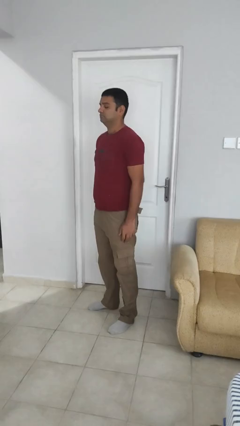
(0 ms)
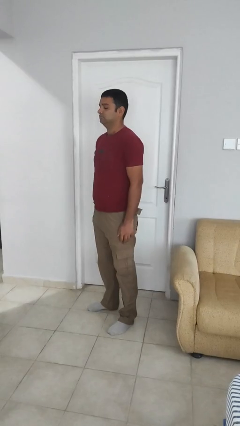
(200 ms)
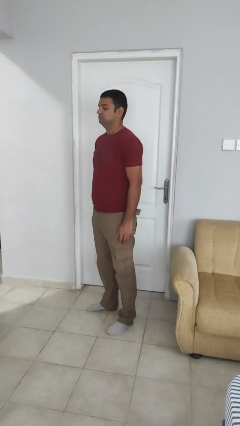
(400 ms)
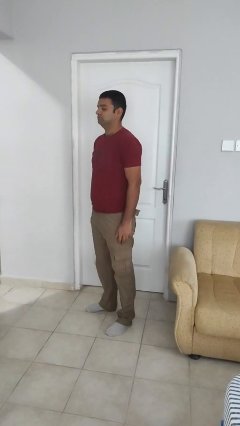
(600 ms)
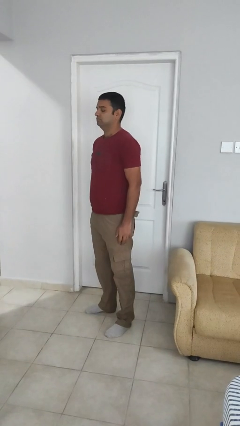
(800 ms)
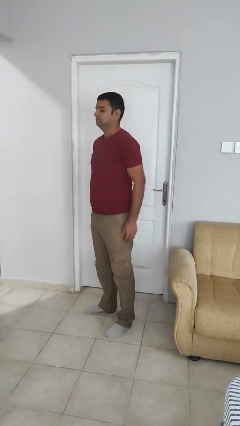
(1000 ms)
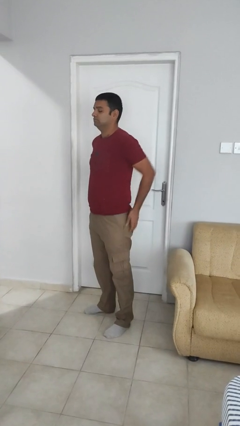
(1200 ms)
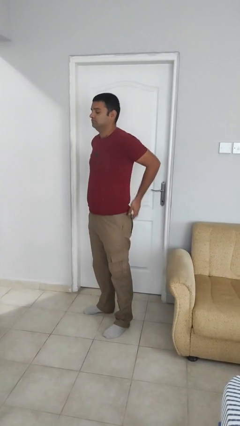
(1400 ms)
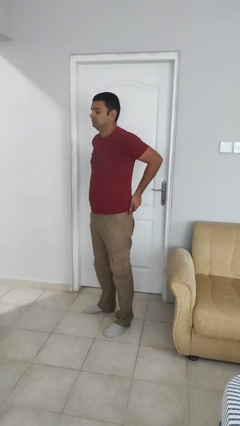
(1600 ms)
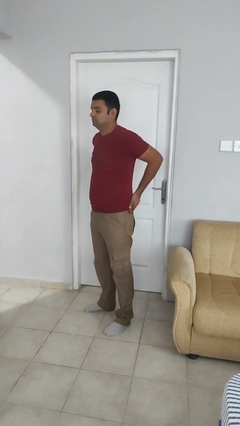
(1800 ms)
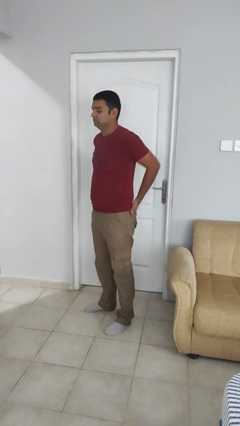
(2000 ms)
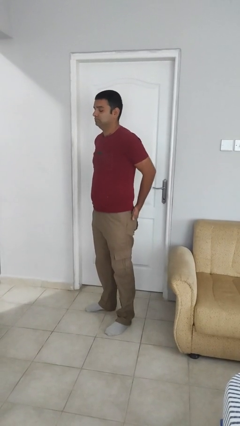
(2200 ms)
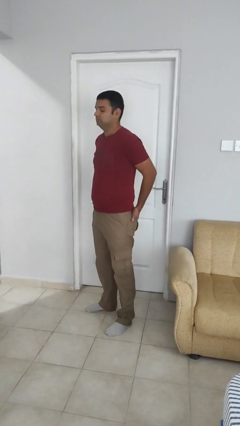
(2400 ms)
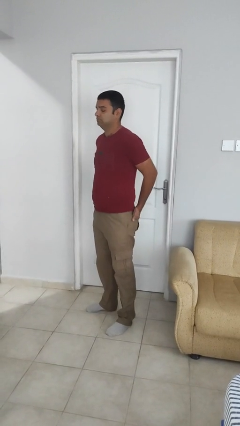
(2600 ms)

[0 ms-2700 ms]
person puts hands in back pockets

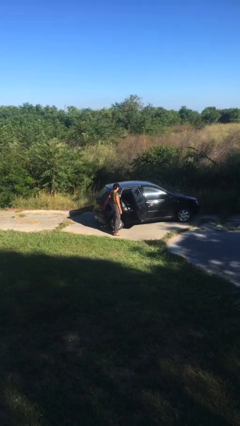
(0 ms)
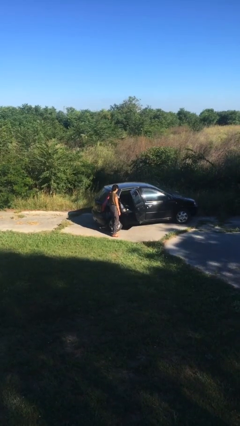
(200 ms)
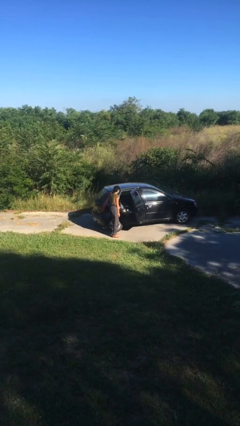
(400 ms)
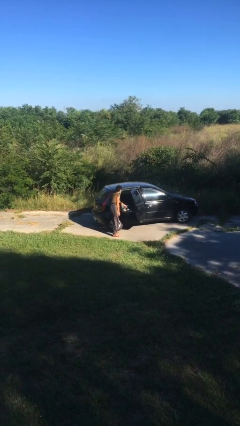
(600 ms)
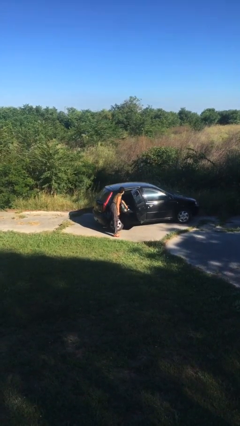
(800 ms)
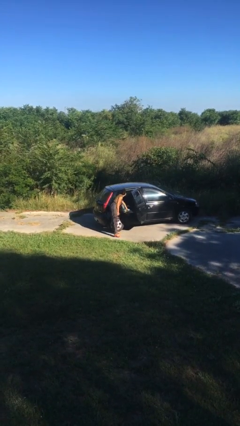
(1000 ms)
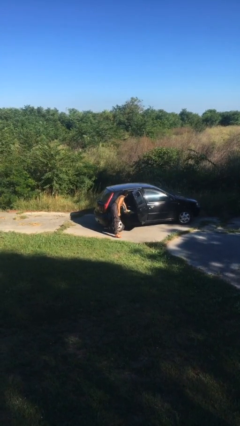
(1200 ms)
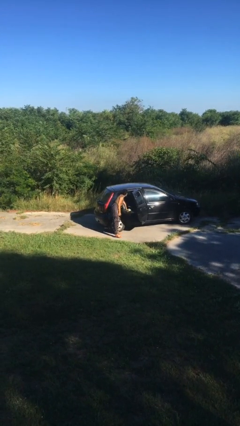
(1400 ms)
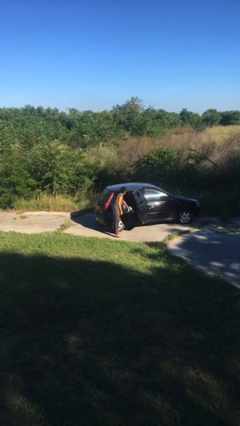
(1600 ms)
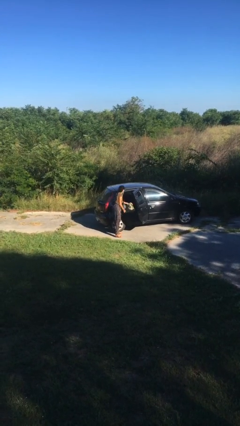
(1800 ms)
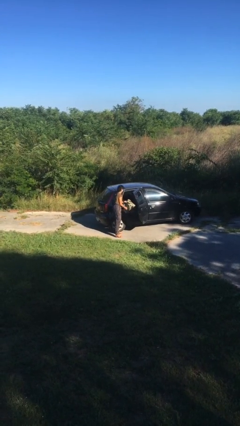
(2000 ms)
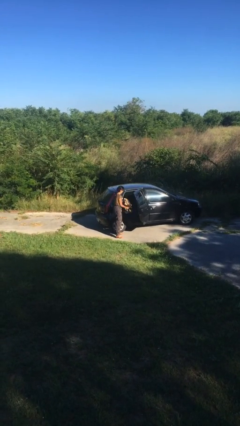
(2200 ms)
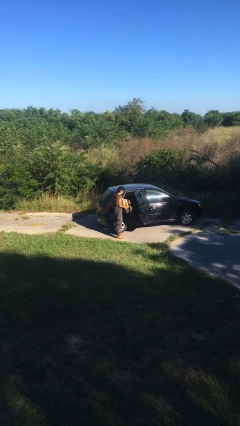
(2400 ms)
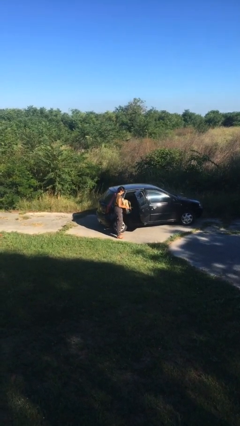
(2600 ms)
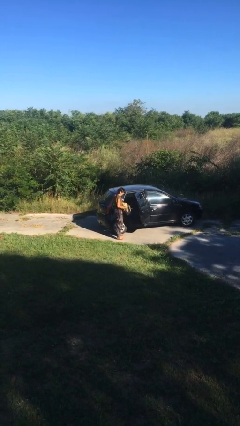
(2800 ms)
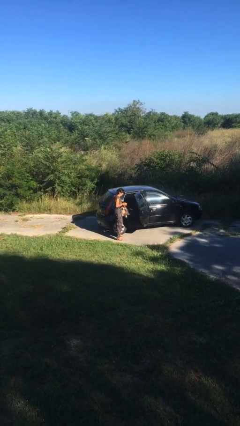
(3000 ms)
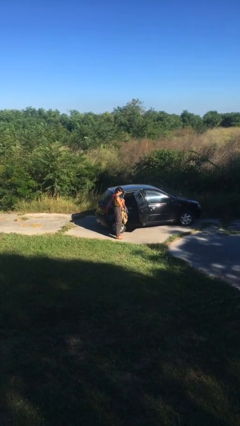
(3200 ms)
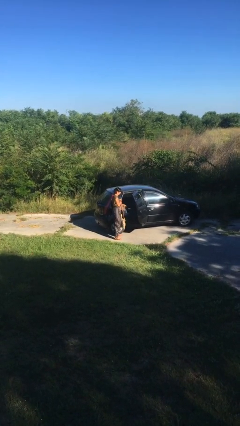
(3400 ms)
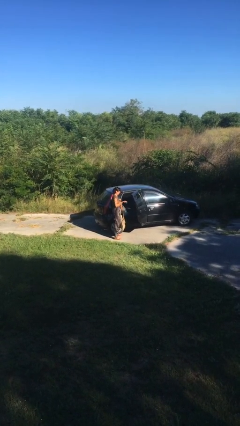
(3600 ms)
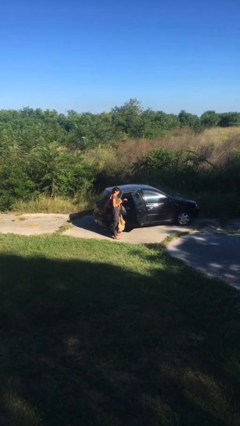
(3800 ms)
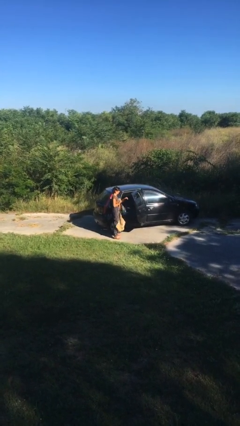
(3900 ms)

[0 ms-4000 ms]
person unloads car

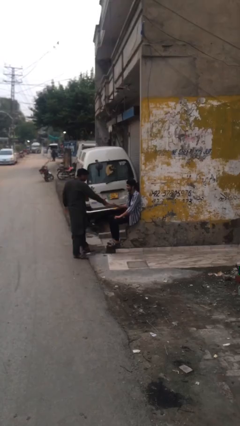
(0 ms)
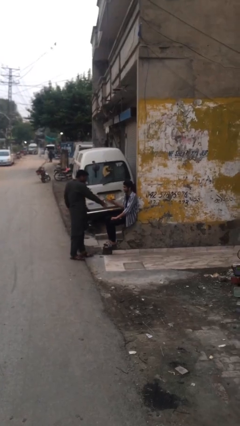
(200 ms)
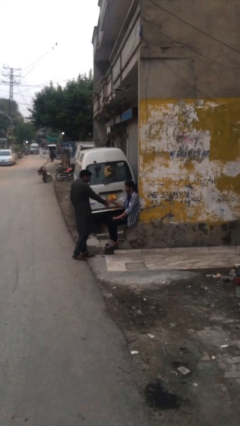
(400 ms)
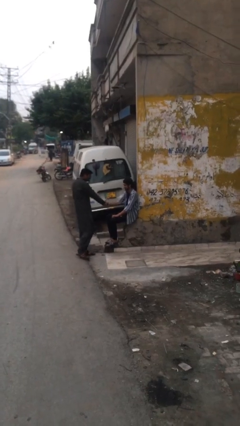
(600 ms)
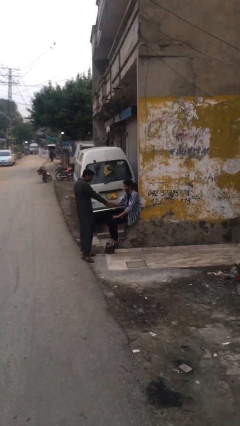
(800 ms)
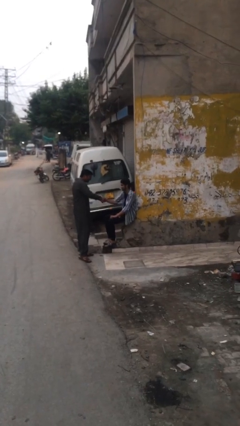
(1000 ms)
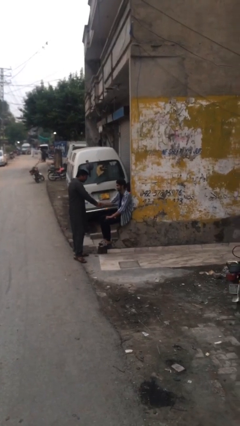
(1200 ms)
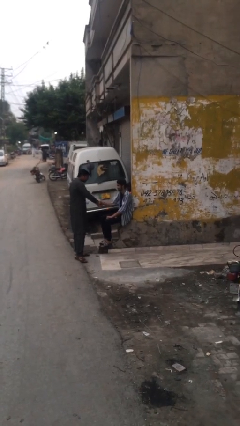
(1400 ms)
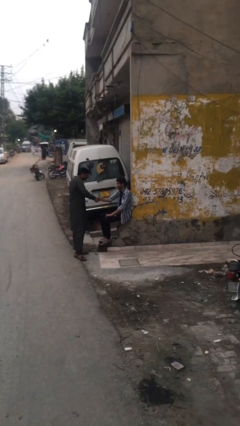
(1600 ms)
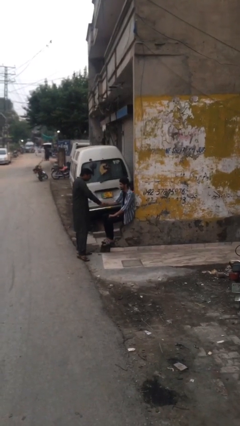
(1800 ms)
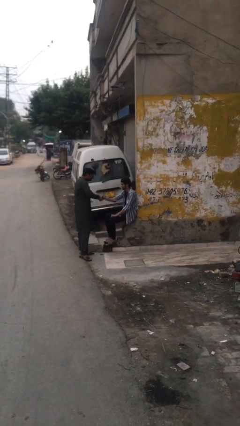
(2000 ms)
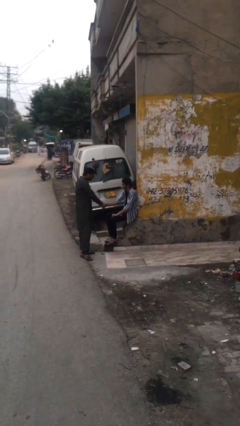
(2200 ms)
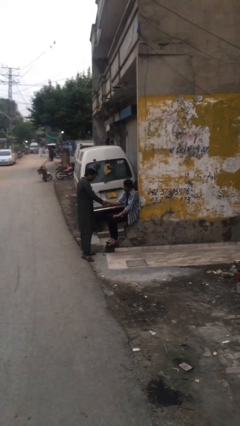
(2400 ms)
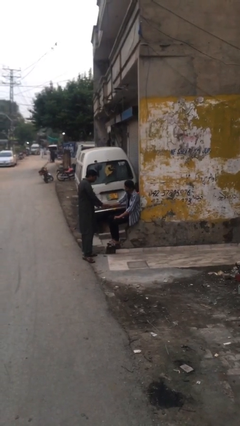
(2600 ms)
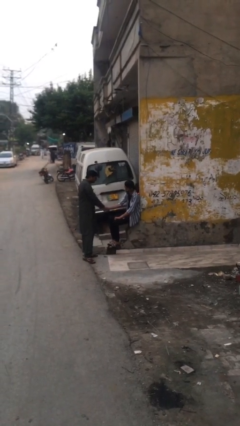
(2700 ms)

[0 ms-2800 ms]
person shakes hand

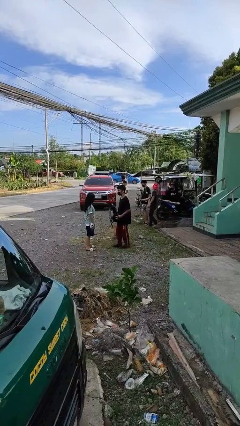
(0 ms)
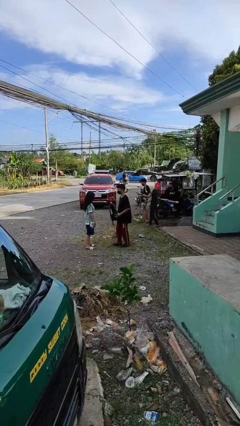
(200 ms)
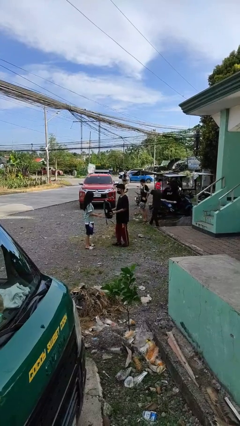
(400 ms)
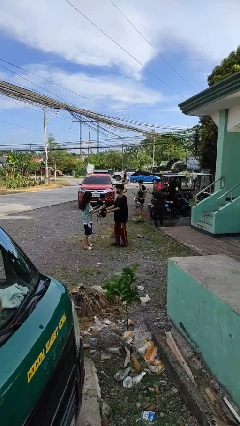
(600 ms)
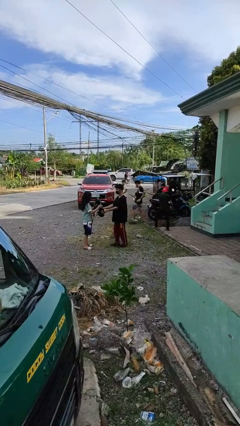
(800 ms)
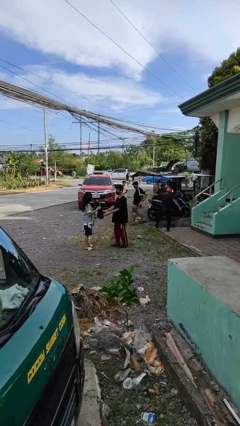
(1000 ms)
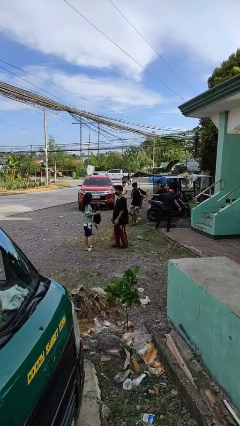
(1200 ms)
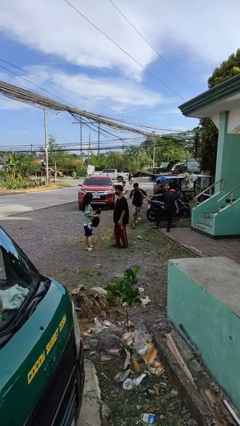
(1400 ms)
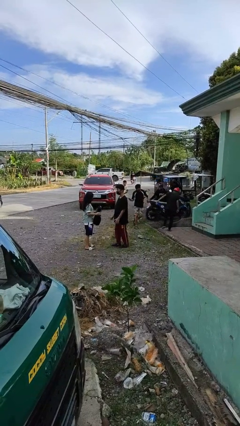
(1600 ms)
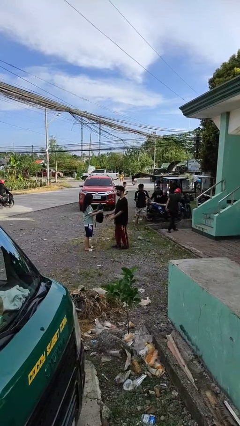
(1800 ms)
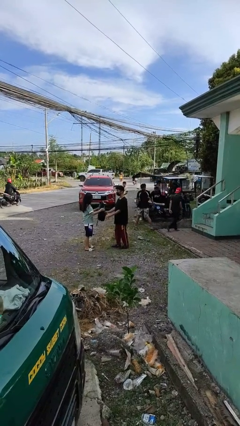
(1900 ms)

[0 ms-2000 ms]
person transfers object to person

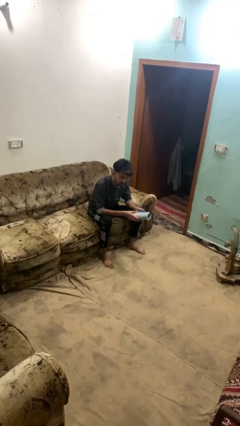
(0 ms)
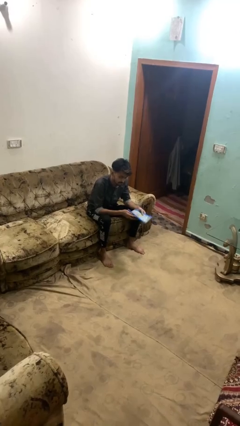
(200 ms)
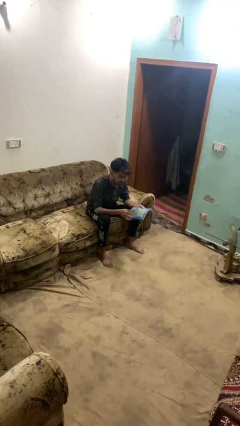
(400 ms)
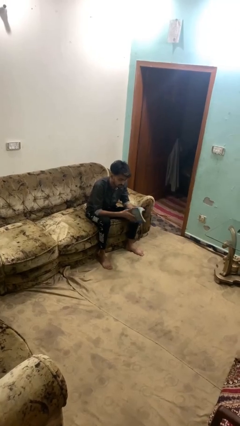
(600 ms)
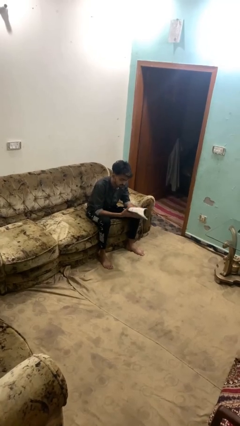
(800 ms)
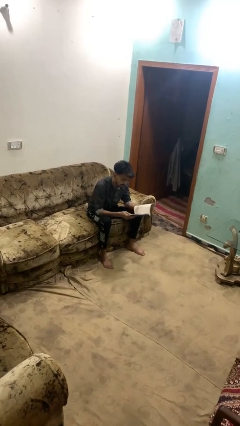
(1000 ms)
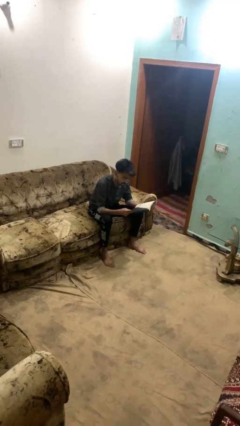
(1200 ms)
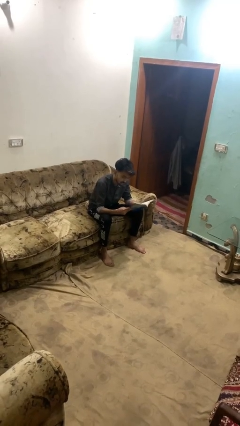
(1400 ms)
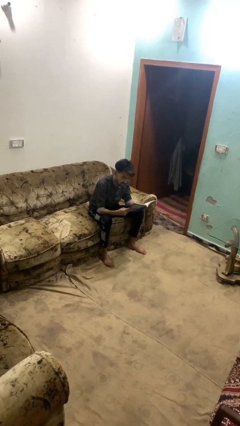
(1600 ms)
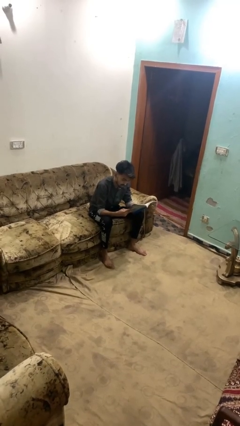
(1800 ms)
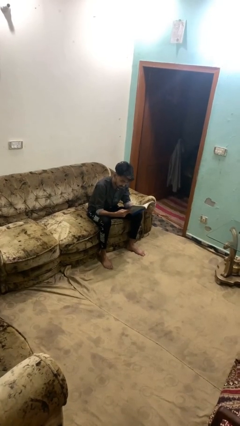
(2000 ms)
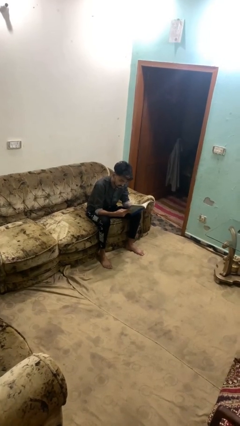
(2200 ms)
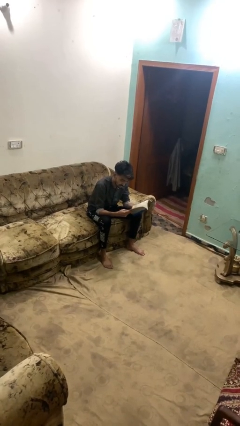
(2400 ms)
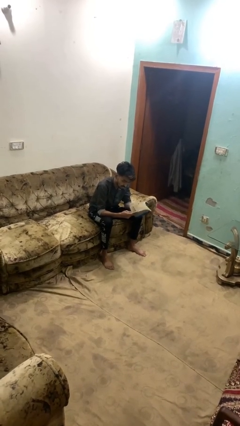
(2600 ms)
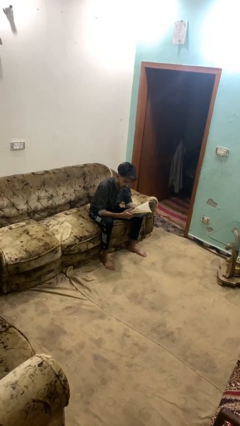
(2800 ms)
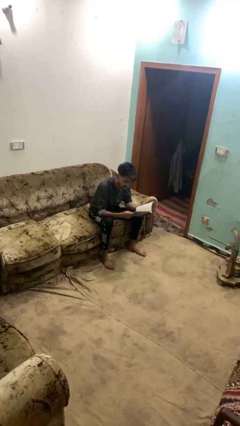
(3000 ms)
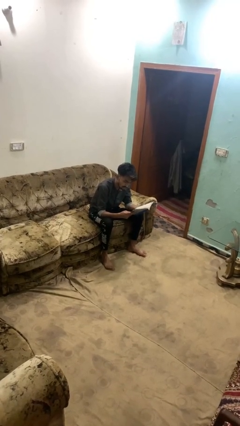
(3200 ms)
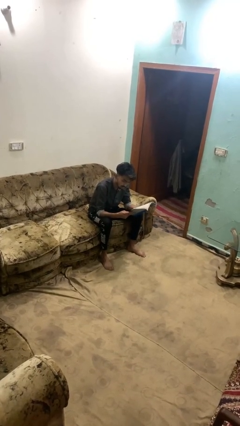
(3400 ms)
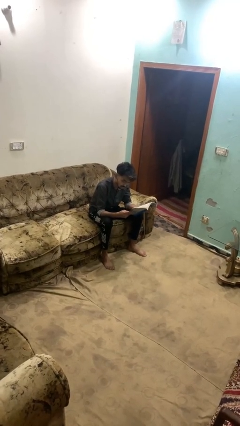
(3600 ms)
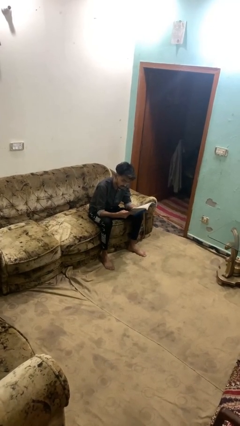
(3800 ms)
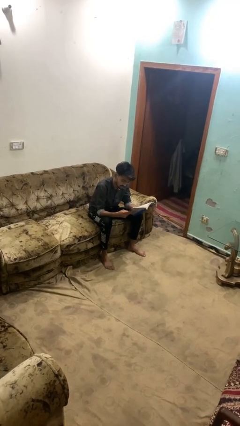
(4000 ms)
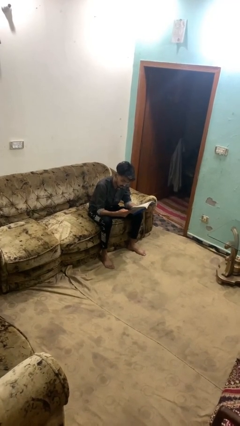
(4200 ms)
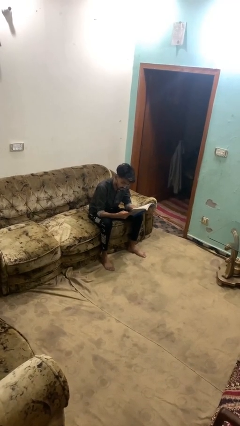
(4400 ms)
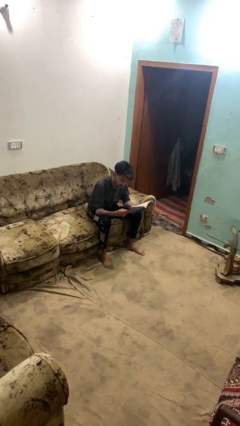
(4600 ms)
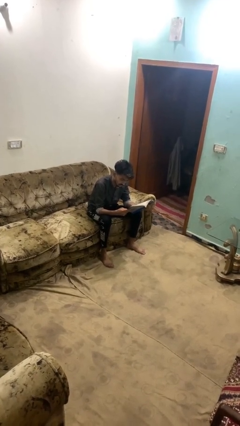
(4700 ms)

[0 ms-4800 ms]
person reads book

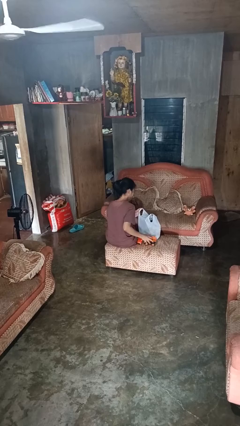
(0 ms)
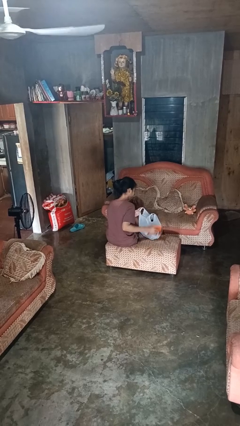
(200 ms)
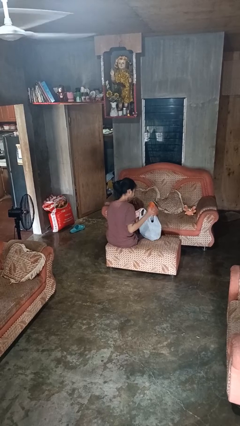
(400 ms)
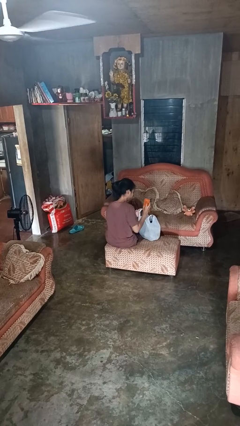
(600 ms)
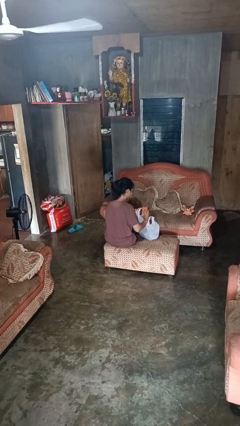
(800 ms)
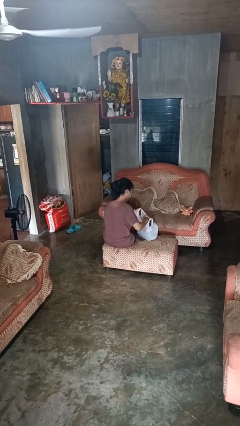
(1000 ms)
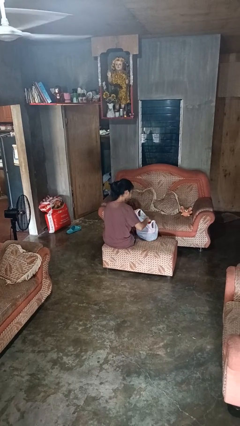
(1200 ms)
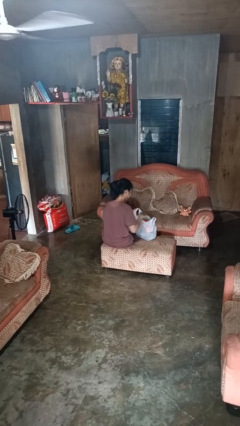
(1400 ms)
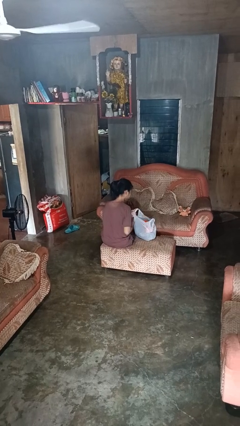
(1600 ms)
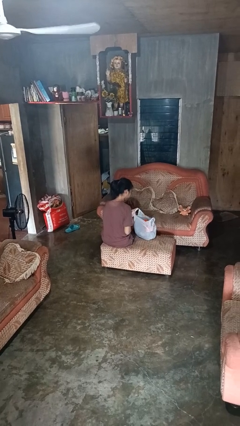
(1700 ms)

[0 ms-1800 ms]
person puts object into bag
